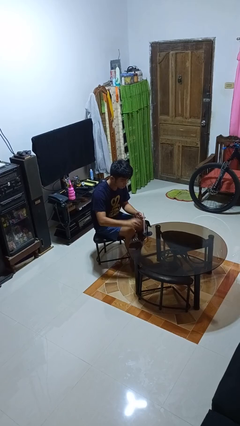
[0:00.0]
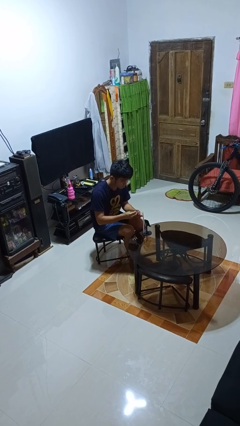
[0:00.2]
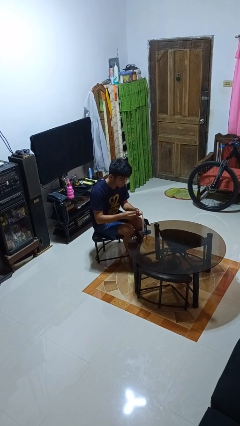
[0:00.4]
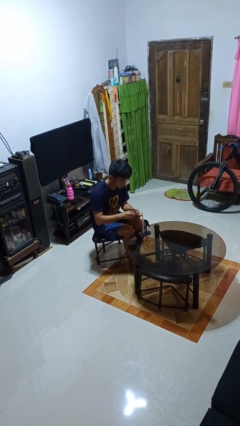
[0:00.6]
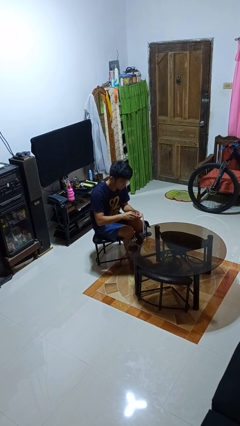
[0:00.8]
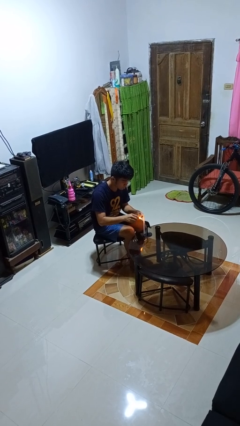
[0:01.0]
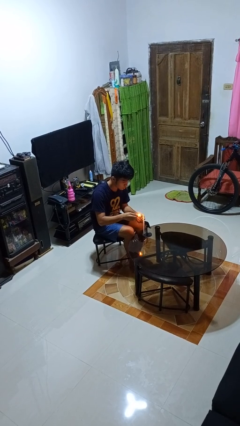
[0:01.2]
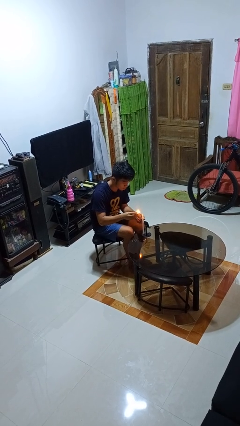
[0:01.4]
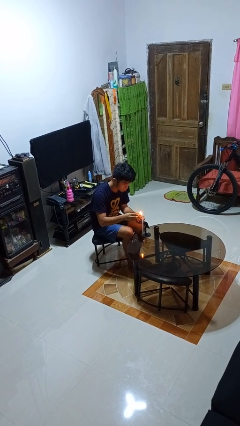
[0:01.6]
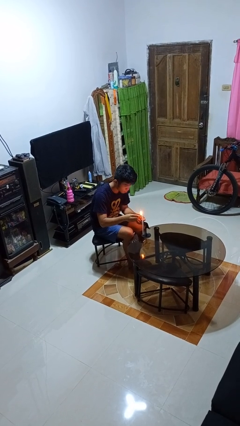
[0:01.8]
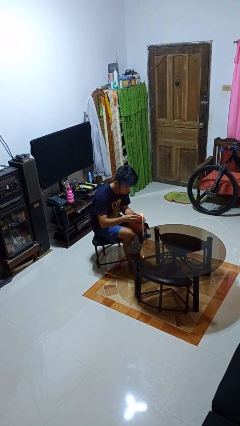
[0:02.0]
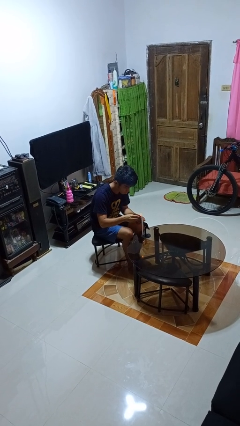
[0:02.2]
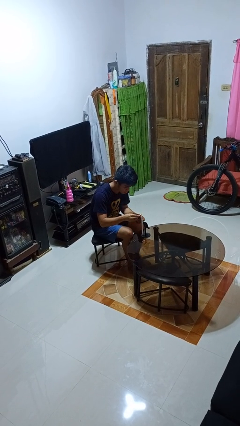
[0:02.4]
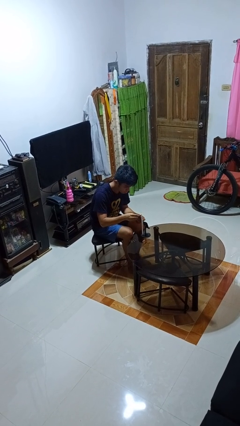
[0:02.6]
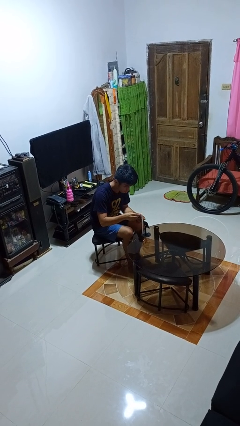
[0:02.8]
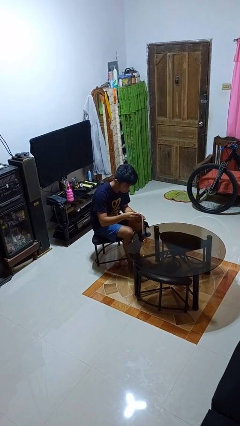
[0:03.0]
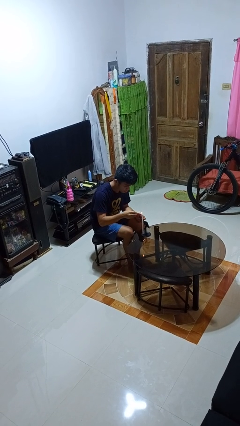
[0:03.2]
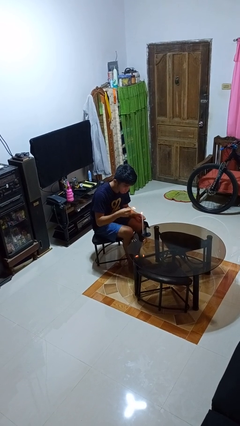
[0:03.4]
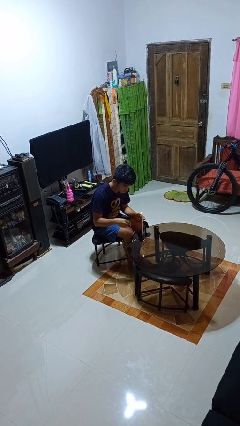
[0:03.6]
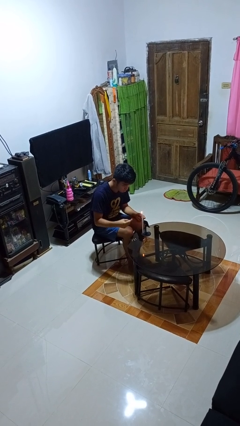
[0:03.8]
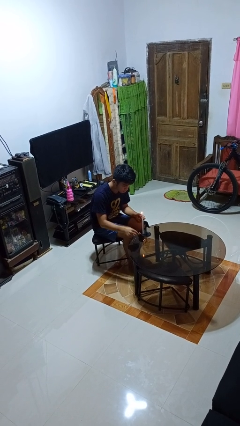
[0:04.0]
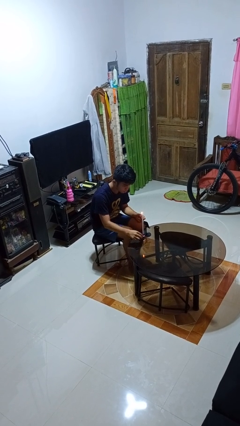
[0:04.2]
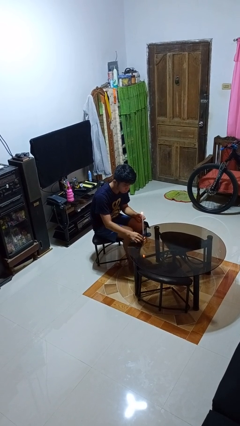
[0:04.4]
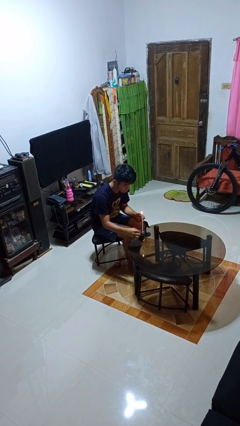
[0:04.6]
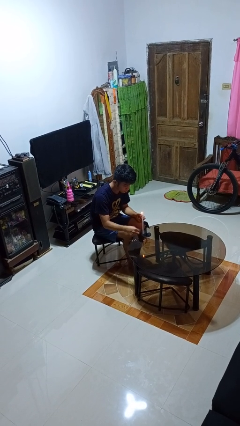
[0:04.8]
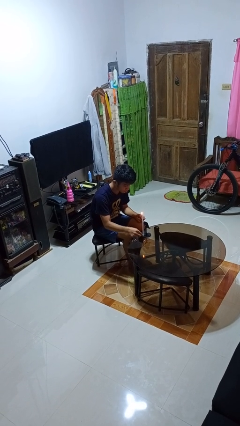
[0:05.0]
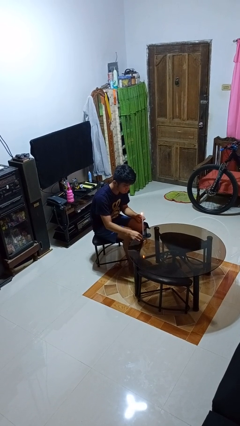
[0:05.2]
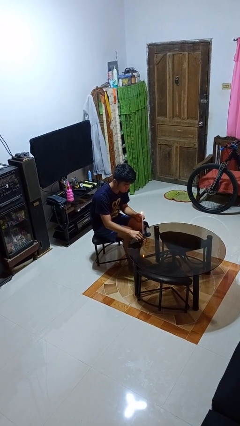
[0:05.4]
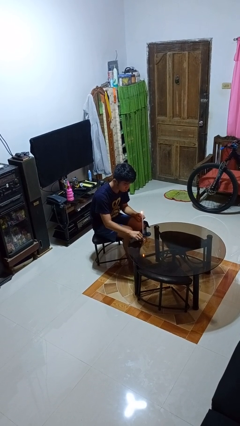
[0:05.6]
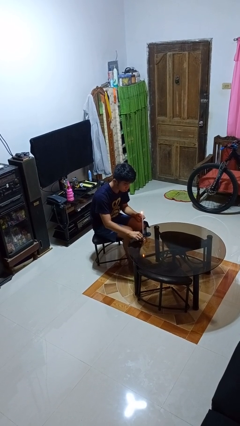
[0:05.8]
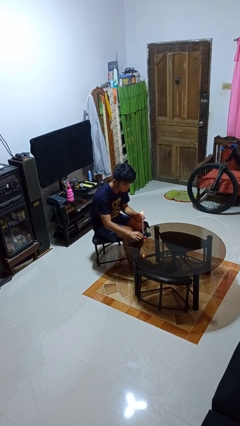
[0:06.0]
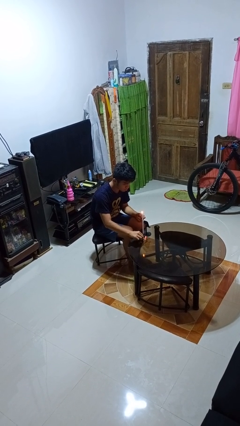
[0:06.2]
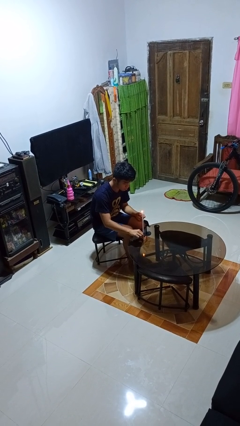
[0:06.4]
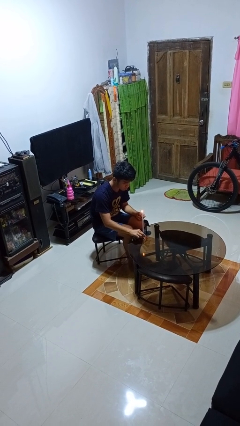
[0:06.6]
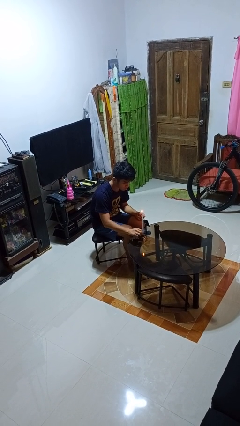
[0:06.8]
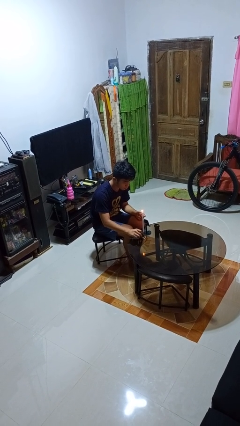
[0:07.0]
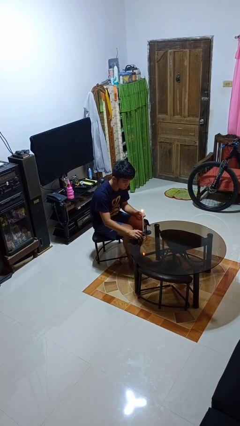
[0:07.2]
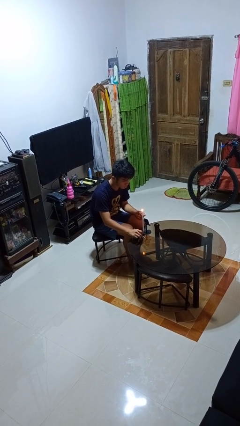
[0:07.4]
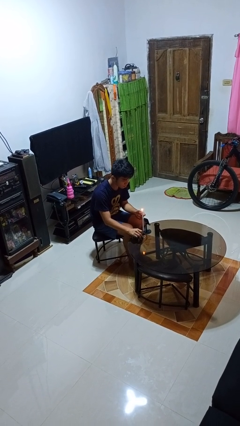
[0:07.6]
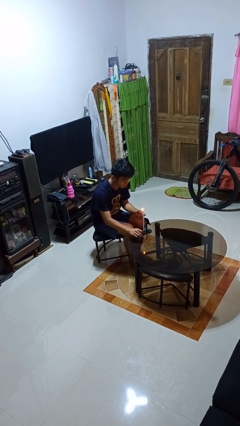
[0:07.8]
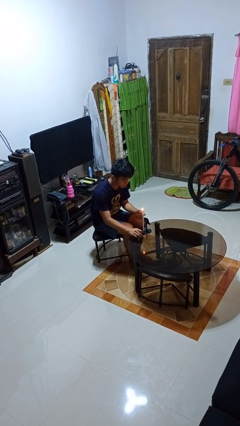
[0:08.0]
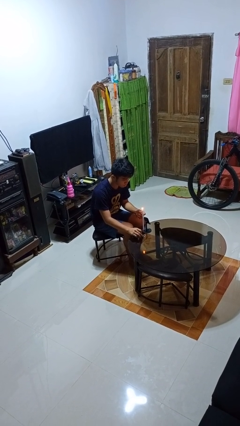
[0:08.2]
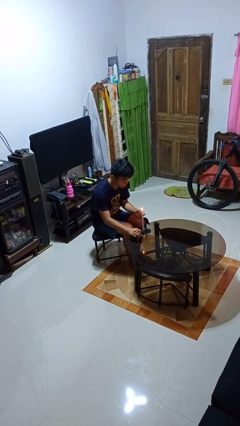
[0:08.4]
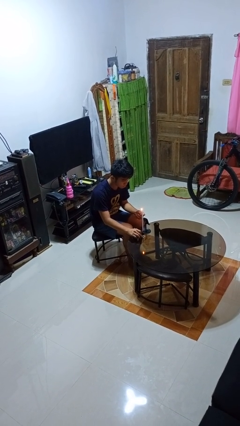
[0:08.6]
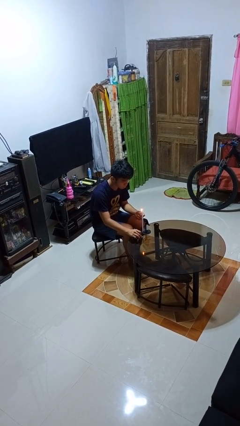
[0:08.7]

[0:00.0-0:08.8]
person lights candle

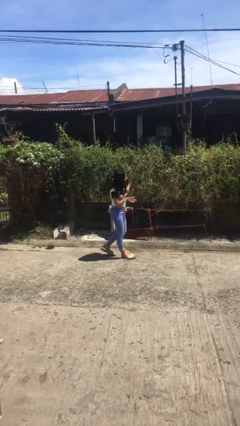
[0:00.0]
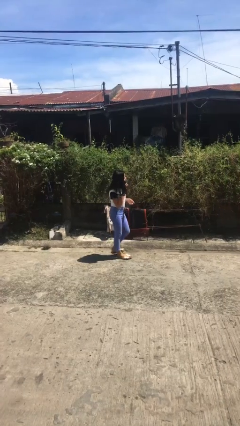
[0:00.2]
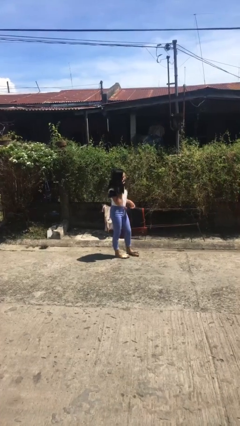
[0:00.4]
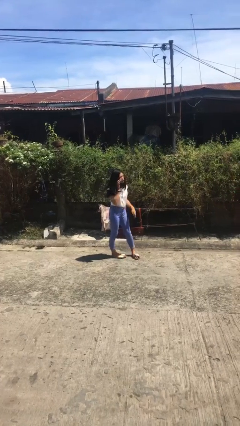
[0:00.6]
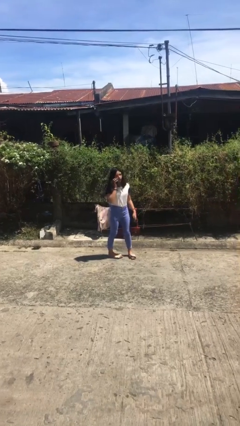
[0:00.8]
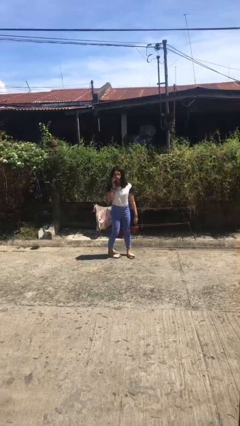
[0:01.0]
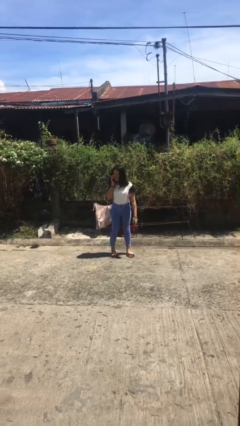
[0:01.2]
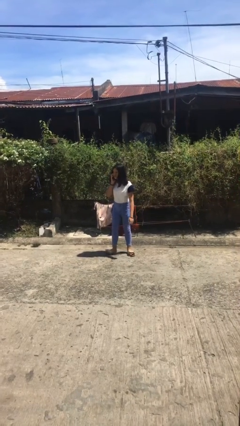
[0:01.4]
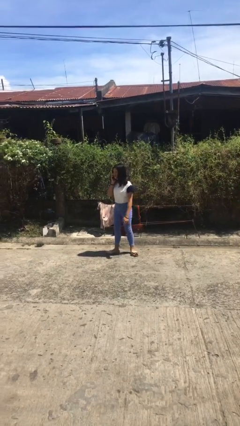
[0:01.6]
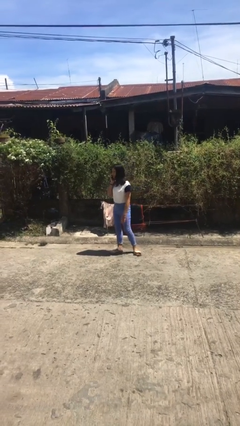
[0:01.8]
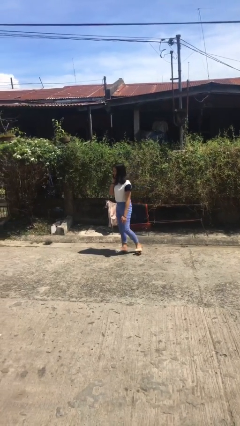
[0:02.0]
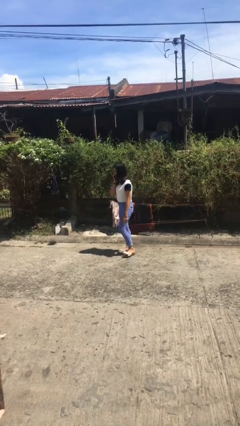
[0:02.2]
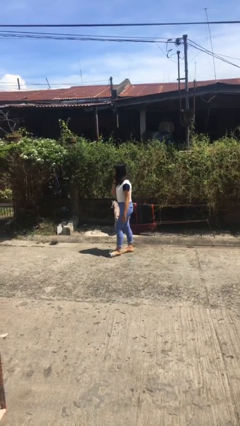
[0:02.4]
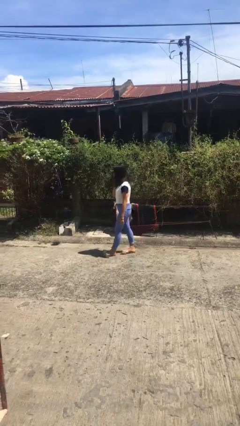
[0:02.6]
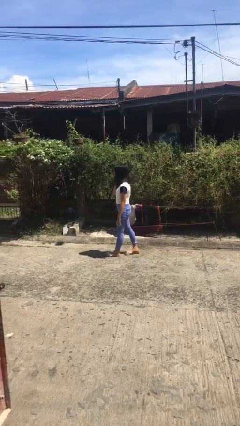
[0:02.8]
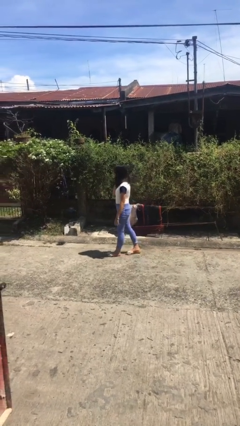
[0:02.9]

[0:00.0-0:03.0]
person talks on phone

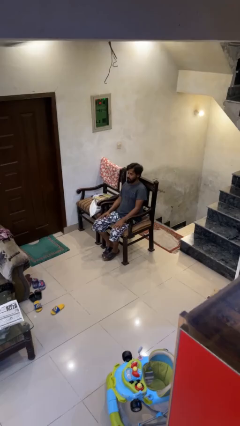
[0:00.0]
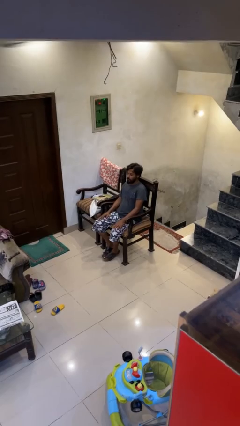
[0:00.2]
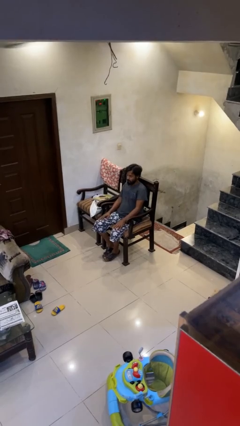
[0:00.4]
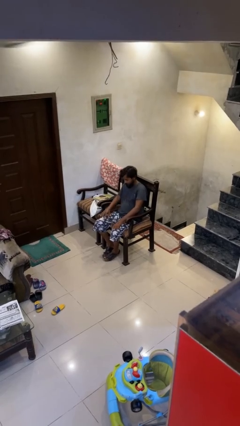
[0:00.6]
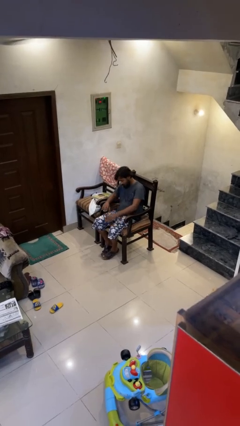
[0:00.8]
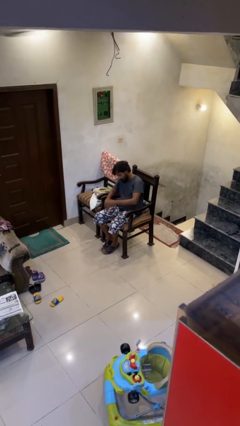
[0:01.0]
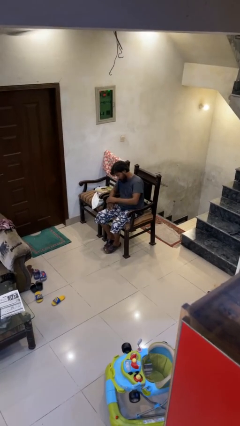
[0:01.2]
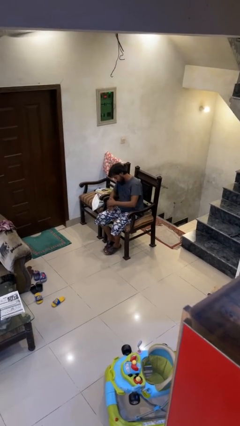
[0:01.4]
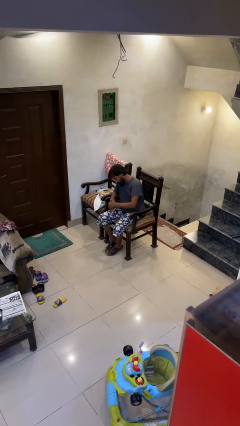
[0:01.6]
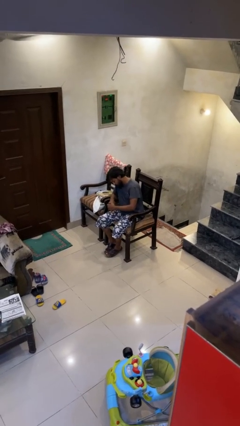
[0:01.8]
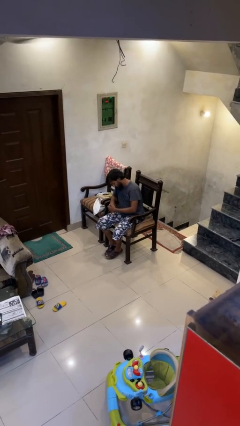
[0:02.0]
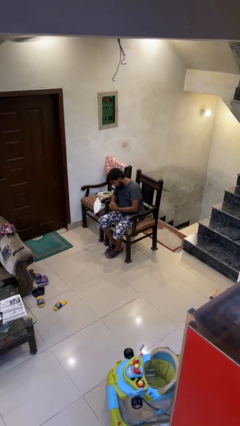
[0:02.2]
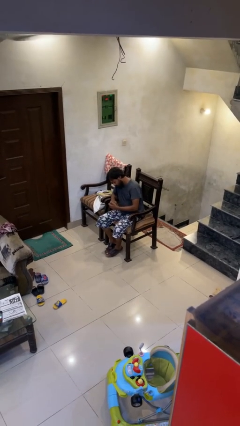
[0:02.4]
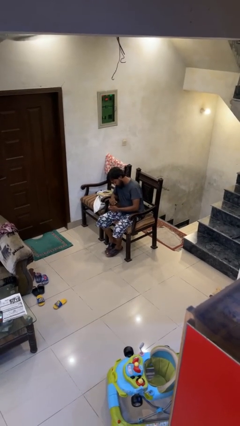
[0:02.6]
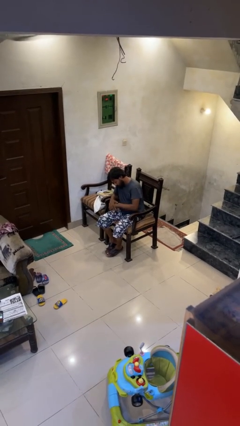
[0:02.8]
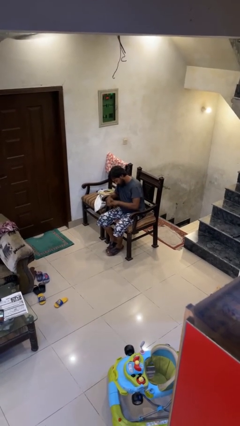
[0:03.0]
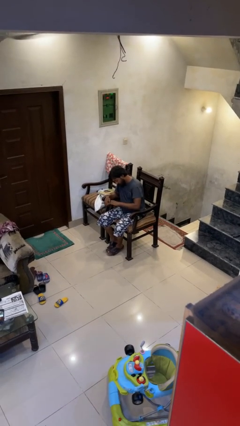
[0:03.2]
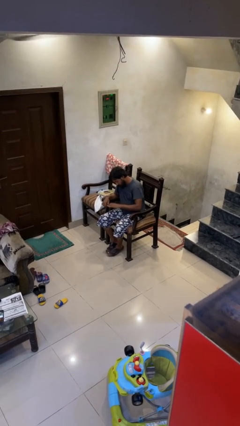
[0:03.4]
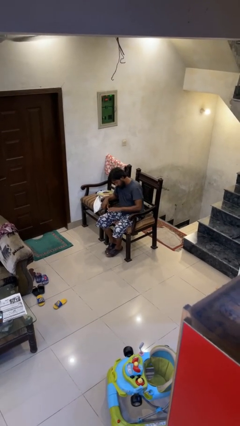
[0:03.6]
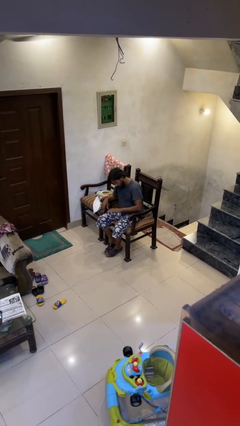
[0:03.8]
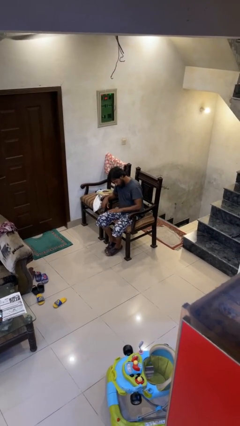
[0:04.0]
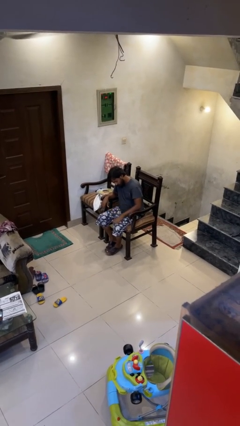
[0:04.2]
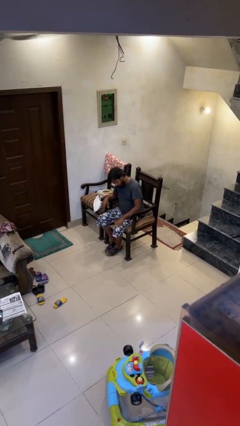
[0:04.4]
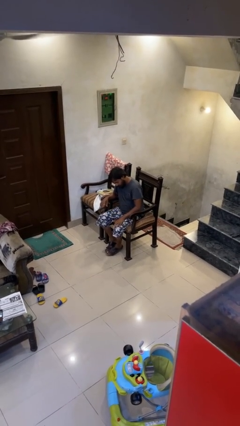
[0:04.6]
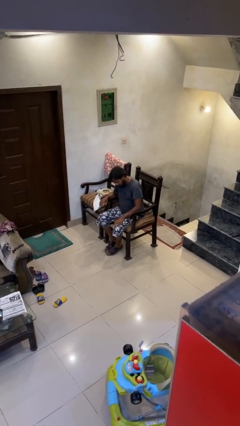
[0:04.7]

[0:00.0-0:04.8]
person looks at hands in lap

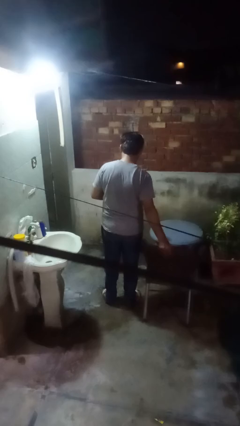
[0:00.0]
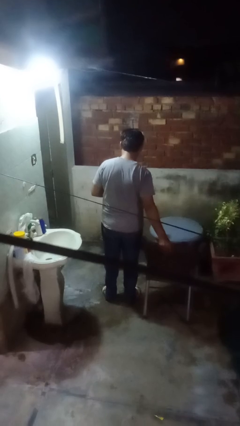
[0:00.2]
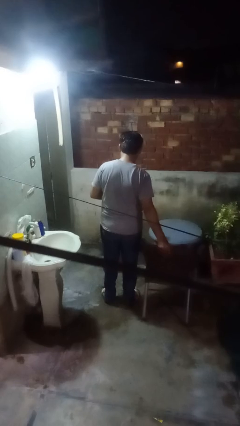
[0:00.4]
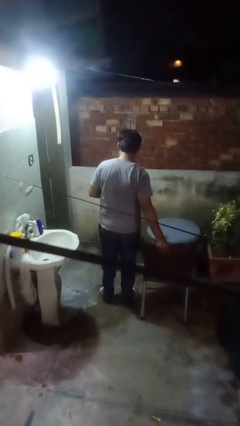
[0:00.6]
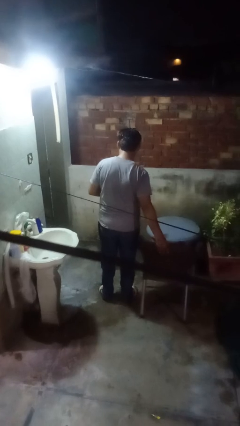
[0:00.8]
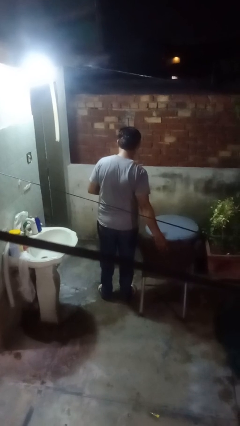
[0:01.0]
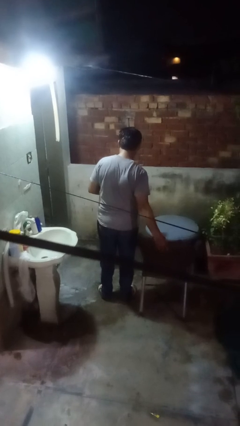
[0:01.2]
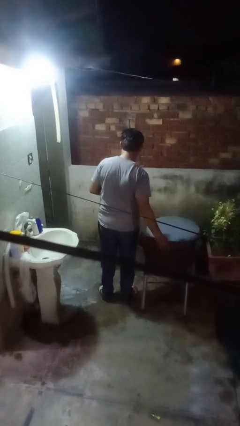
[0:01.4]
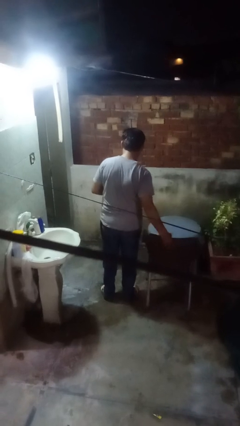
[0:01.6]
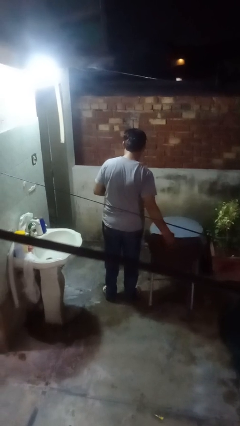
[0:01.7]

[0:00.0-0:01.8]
person pushes in chair
